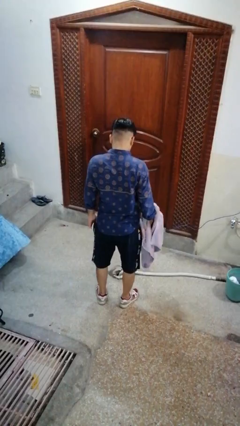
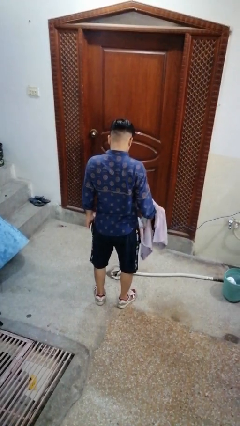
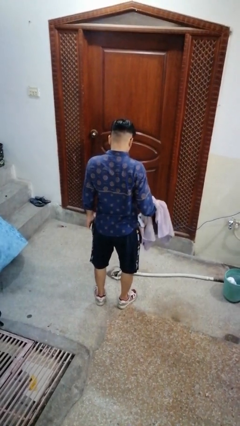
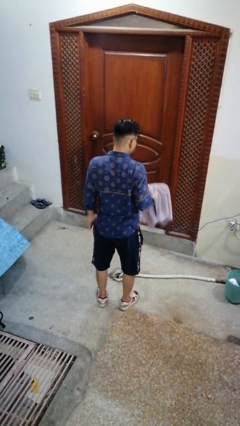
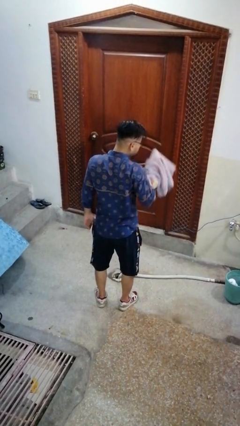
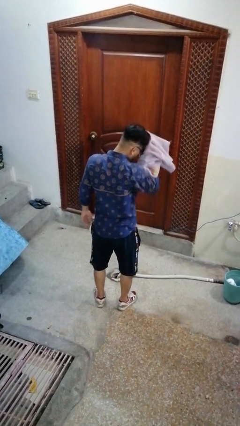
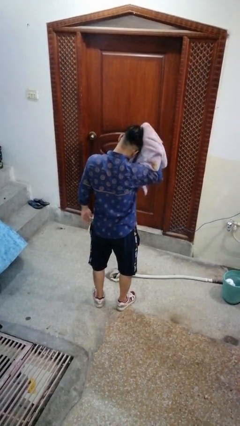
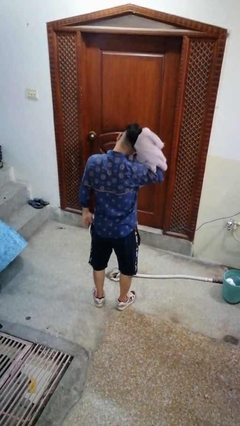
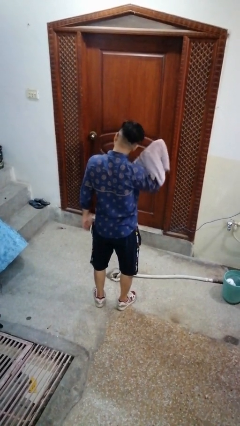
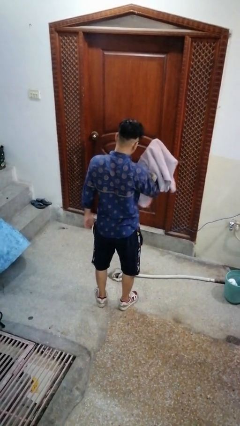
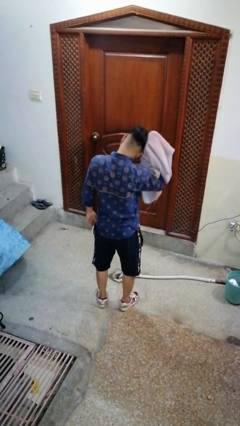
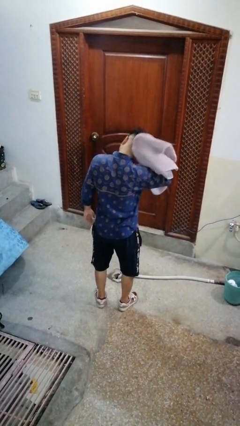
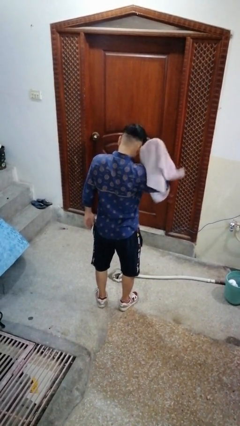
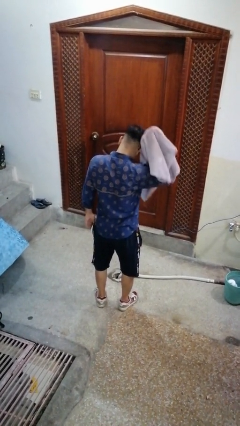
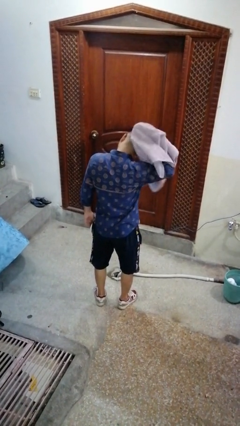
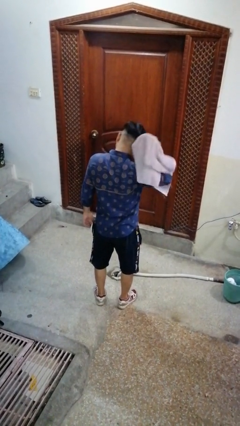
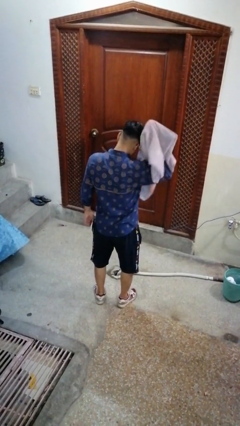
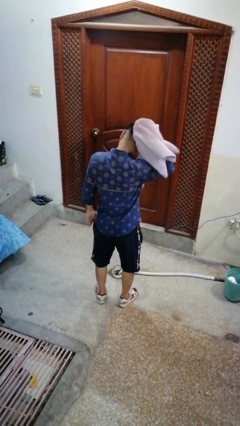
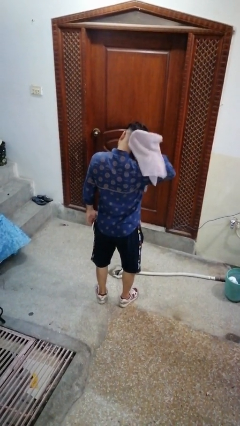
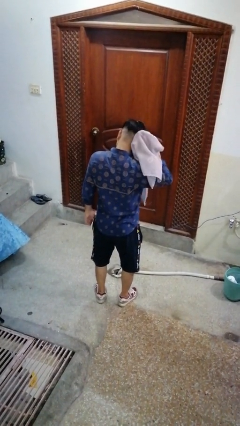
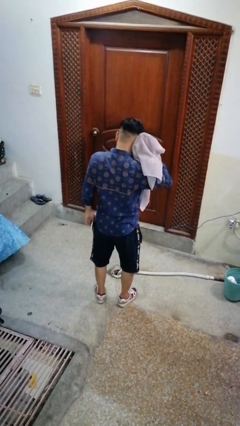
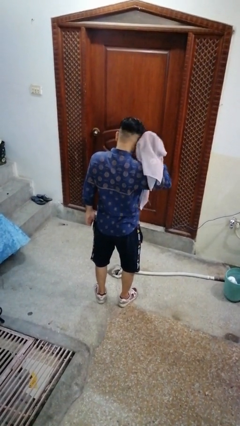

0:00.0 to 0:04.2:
person dries hair with towel

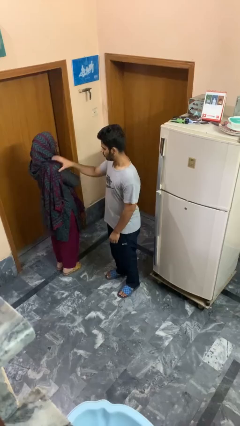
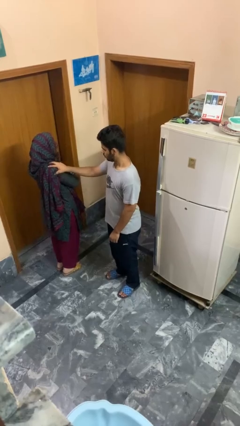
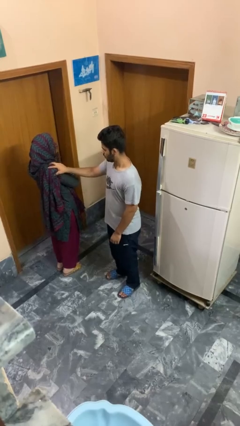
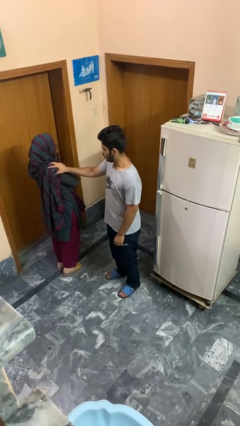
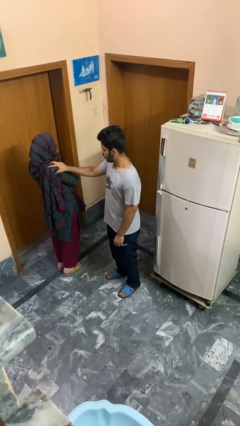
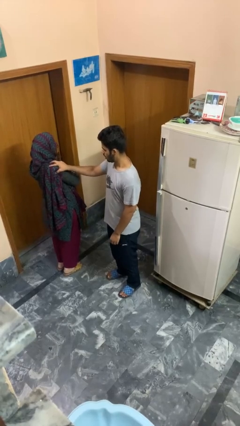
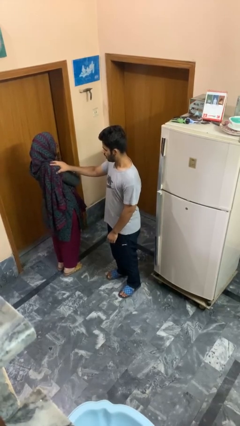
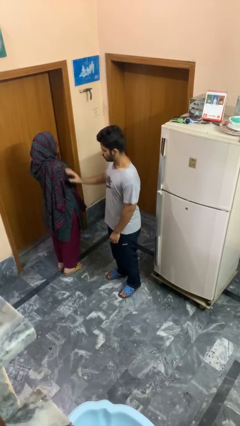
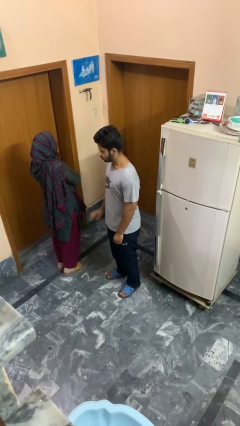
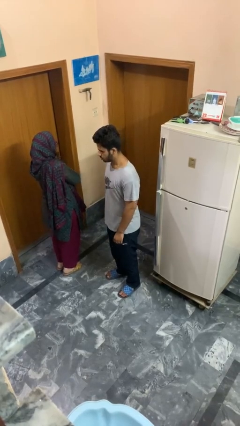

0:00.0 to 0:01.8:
person pounds shoulders of person

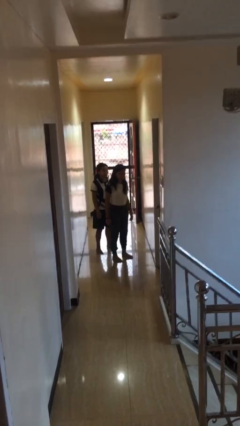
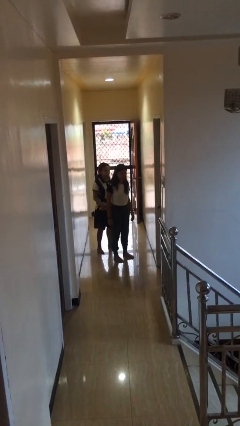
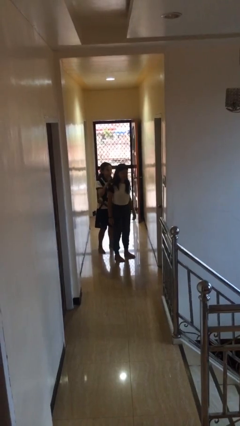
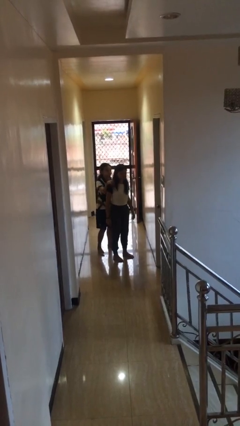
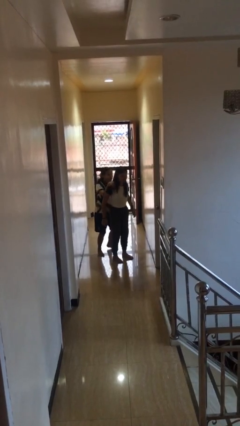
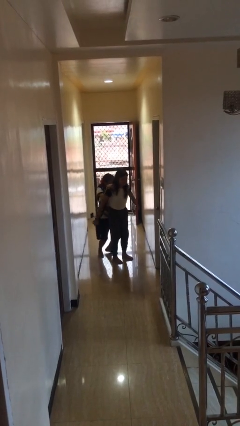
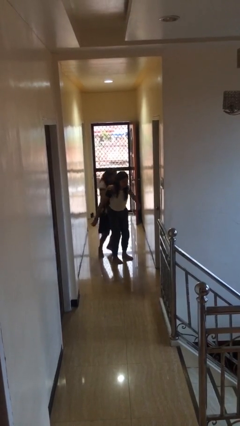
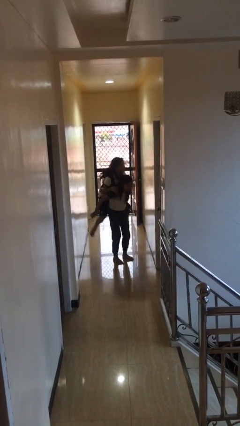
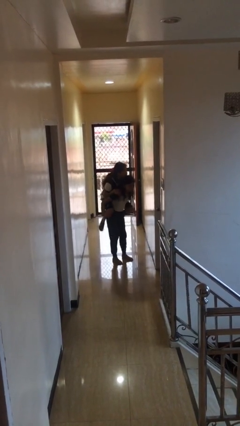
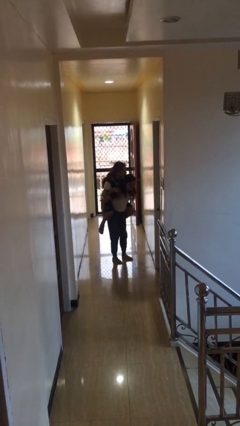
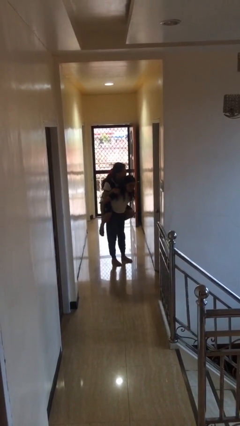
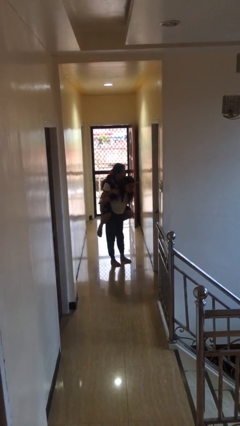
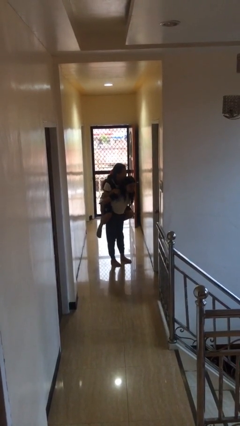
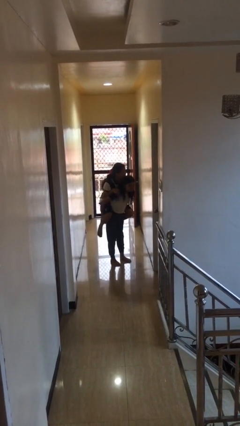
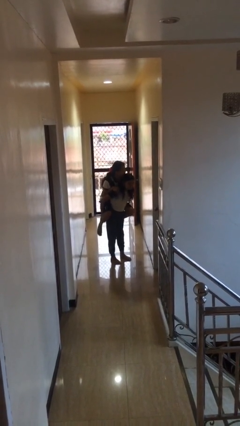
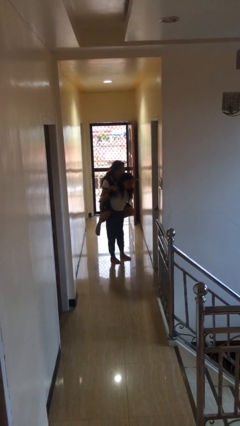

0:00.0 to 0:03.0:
person carries person over shoulder

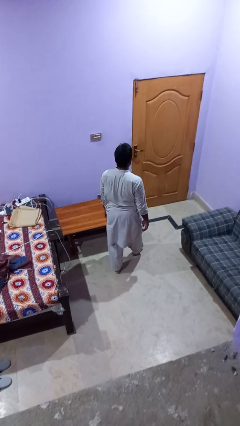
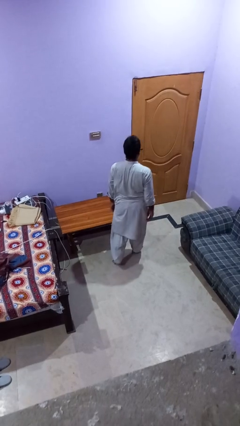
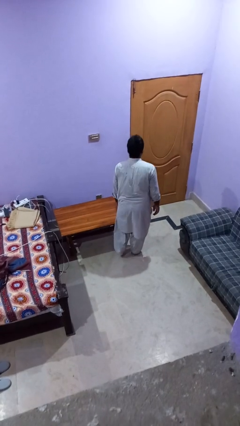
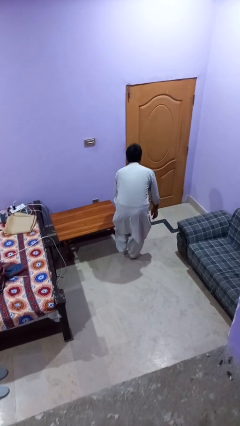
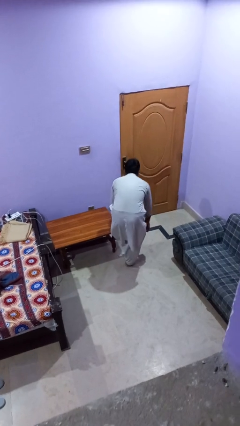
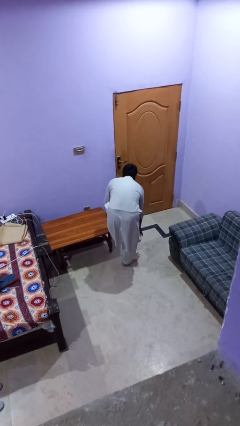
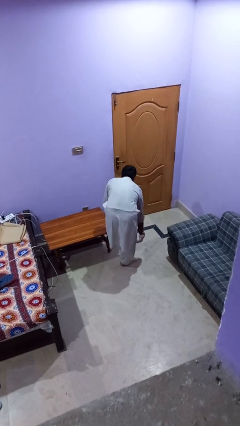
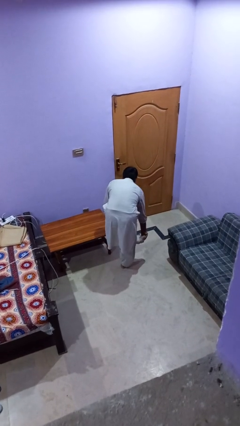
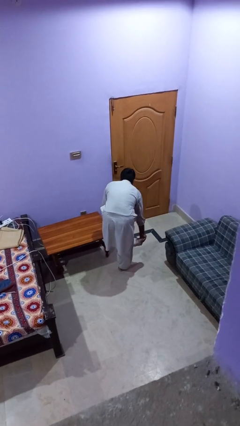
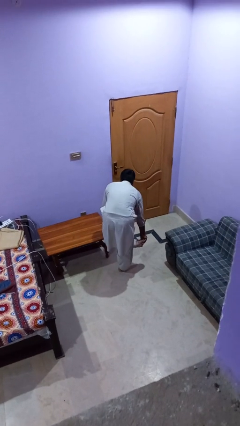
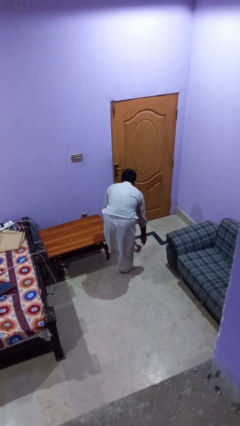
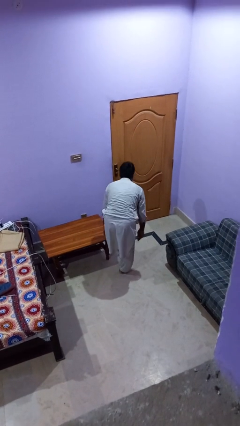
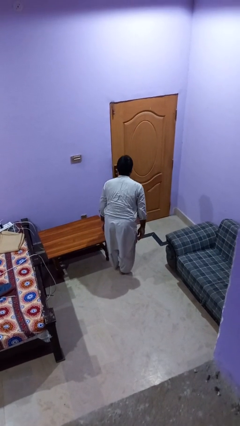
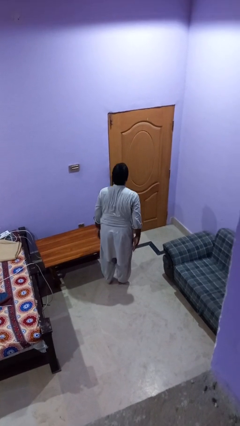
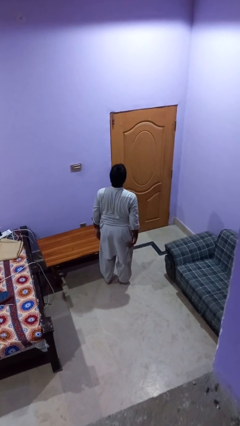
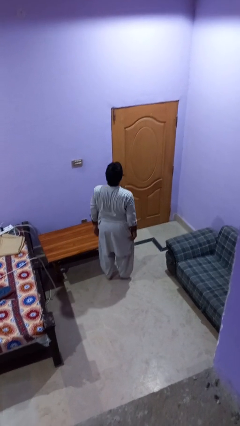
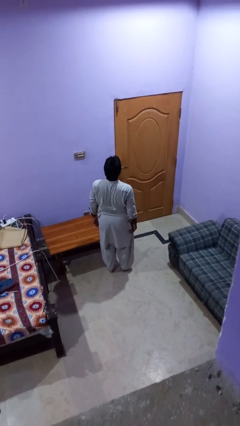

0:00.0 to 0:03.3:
person bumps into table

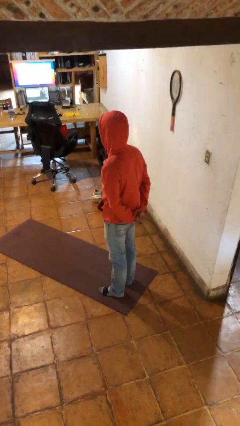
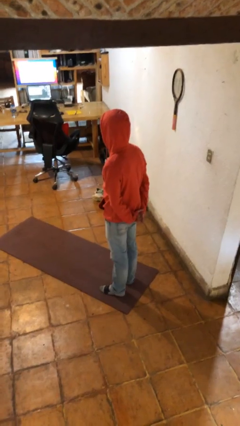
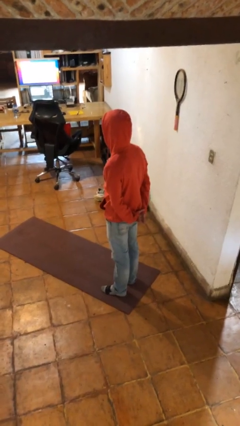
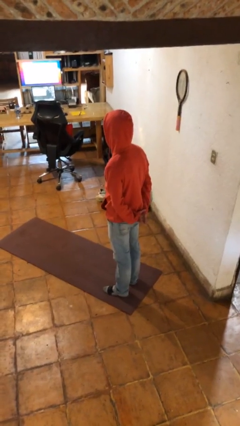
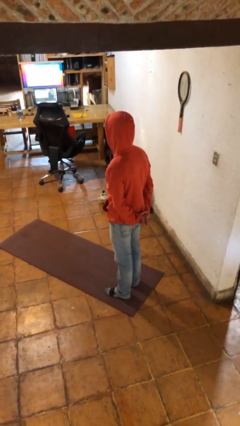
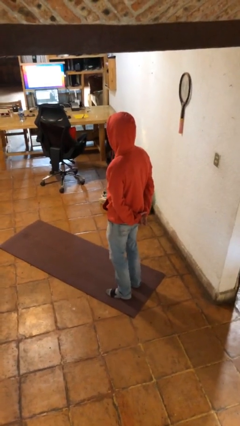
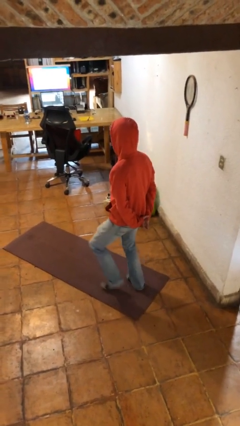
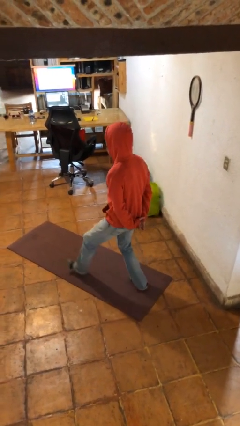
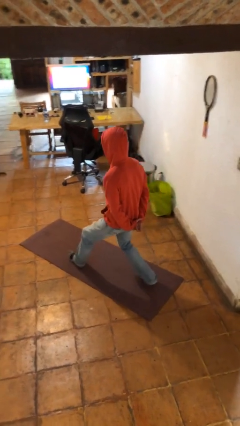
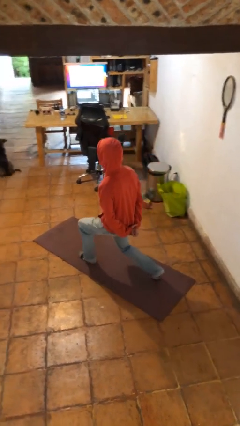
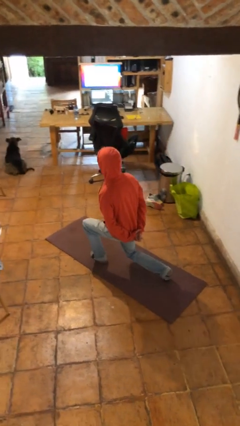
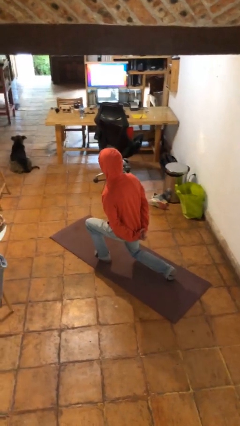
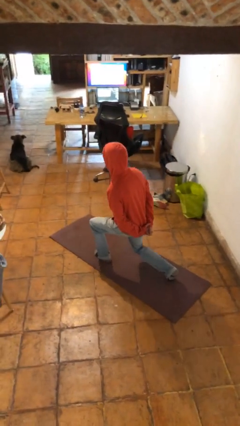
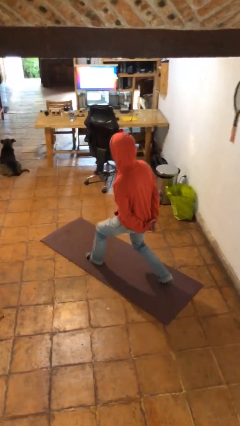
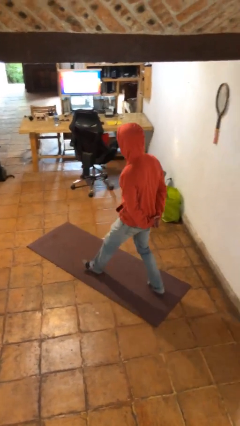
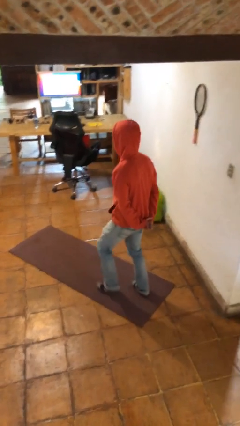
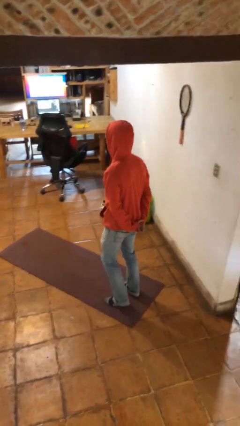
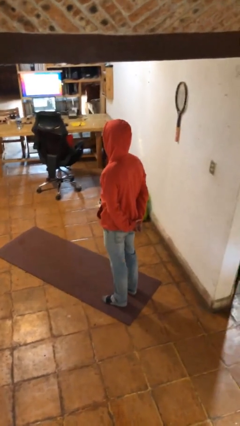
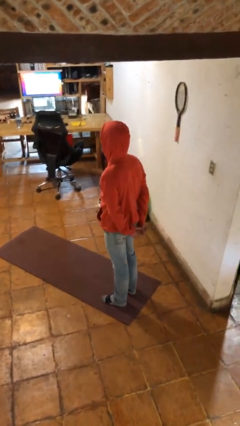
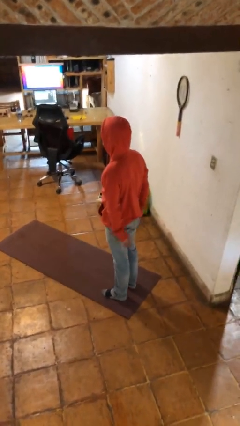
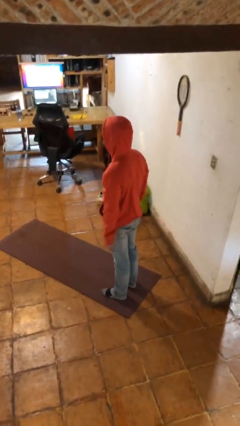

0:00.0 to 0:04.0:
person exercises with lunges

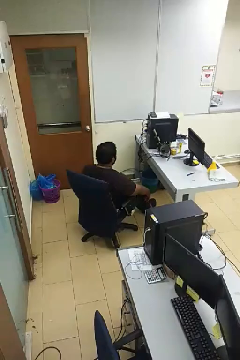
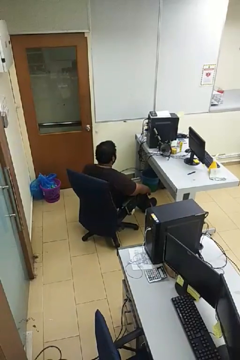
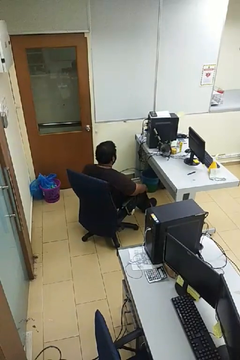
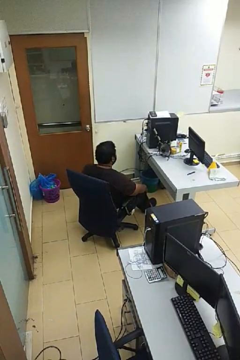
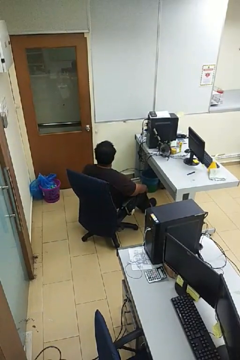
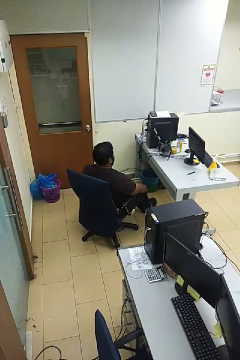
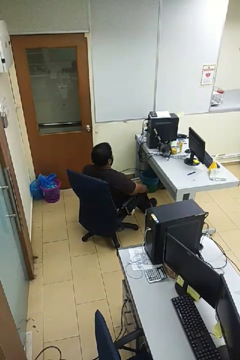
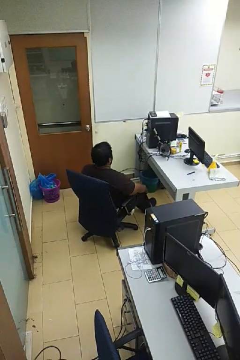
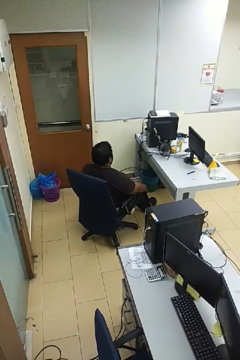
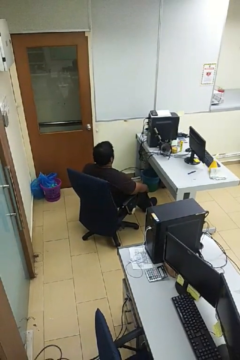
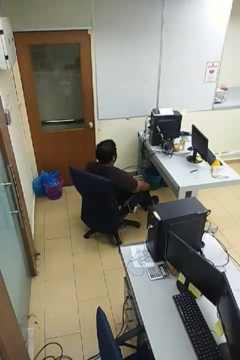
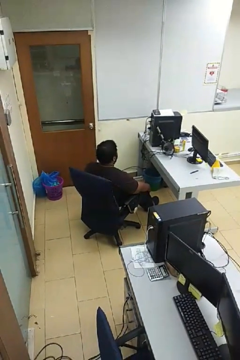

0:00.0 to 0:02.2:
person shakes head
